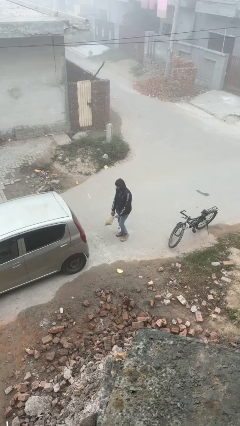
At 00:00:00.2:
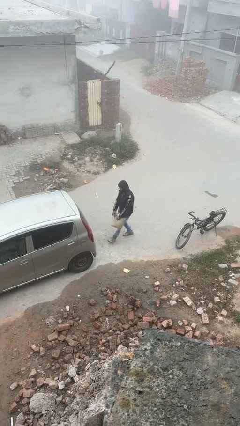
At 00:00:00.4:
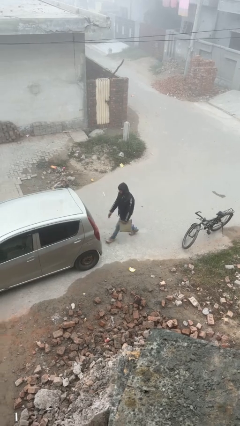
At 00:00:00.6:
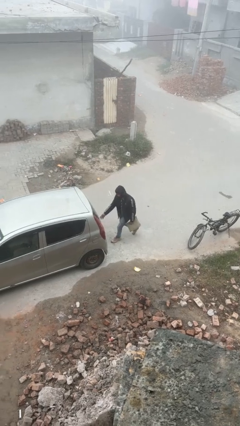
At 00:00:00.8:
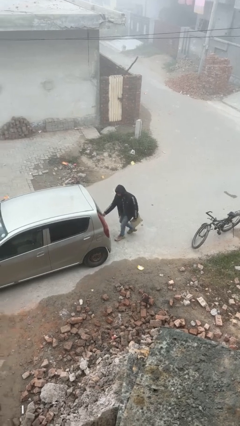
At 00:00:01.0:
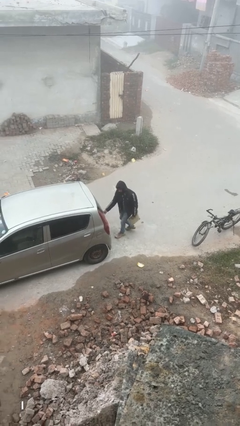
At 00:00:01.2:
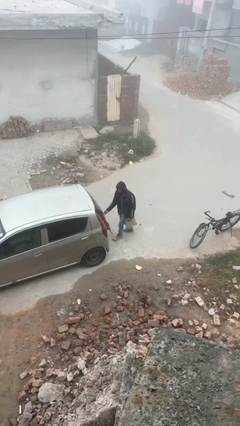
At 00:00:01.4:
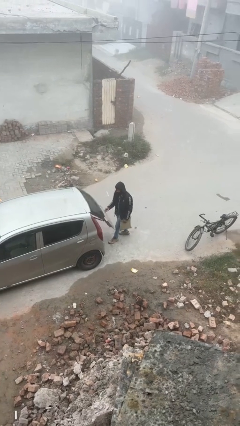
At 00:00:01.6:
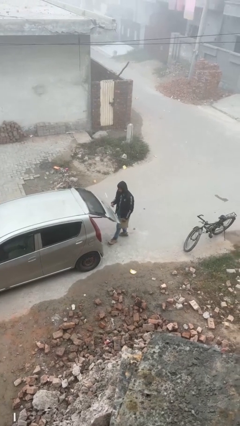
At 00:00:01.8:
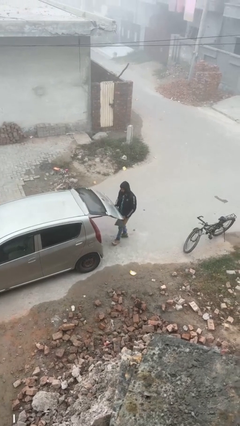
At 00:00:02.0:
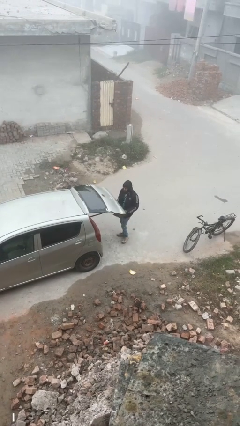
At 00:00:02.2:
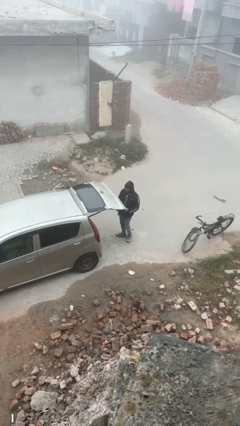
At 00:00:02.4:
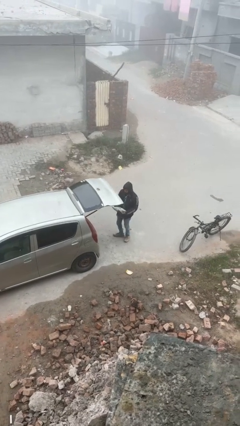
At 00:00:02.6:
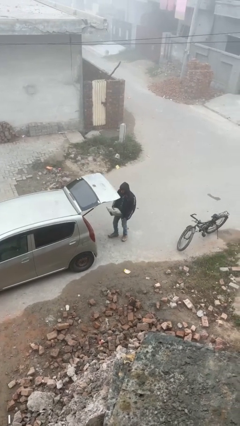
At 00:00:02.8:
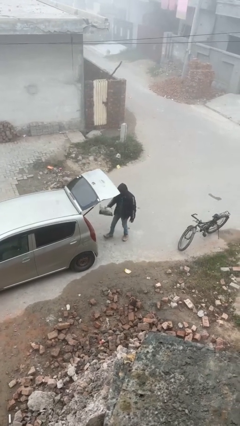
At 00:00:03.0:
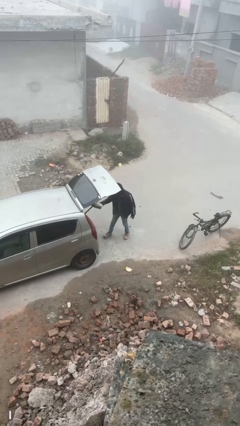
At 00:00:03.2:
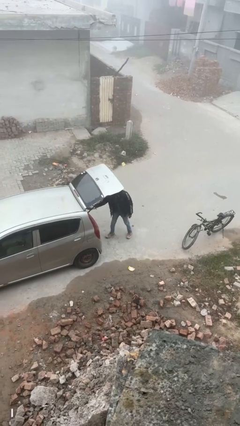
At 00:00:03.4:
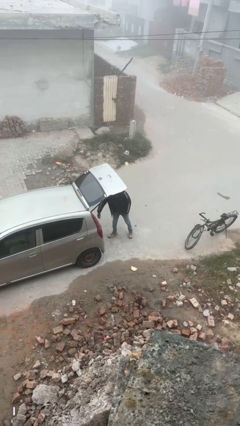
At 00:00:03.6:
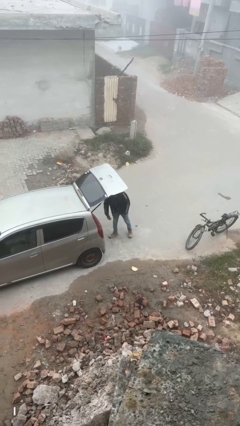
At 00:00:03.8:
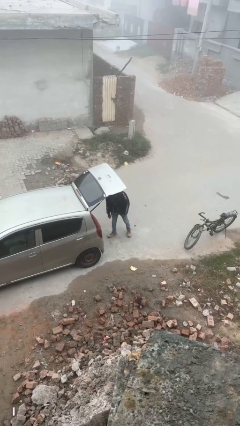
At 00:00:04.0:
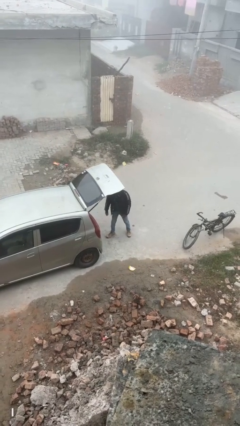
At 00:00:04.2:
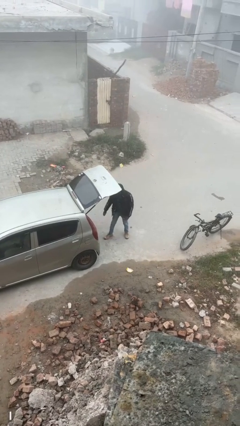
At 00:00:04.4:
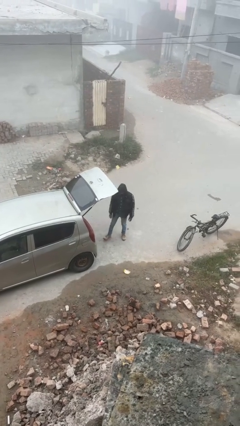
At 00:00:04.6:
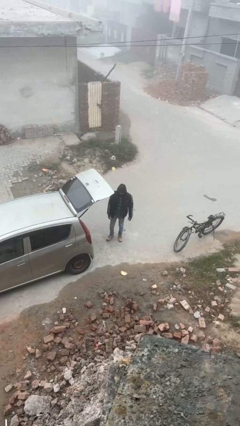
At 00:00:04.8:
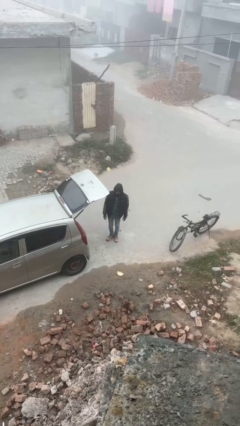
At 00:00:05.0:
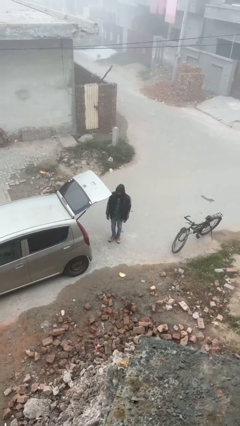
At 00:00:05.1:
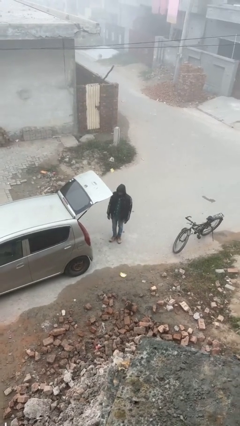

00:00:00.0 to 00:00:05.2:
person loads car

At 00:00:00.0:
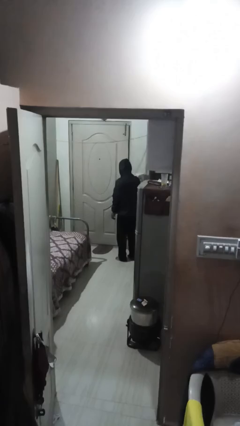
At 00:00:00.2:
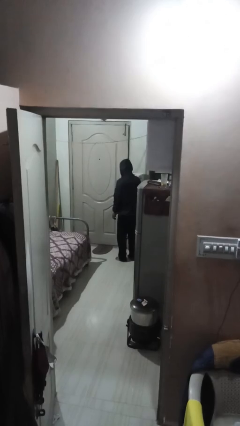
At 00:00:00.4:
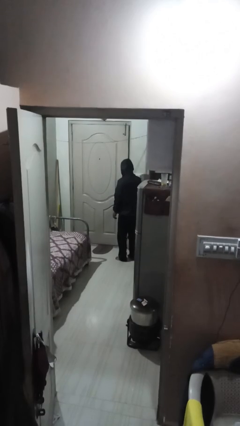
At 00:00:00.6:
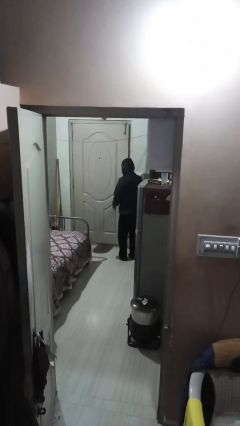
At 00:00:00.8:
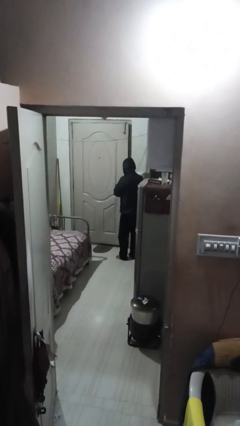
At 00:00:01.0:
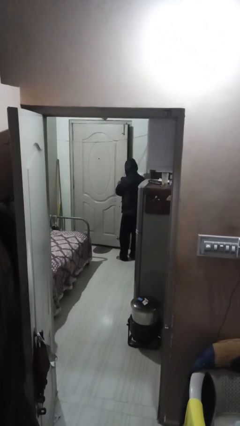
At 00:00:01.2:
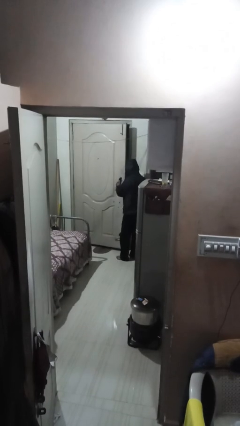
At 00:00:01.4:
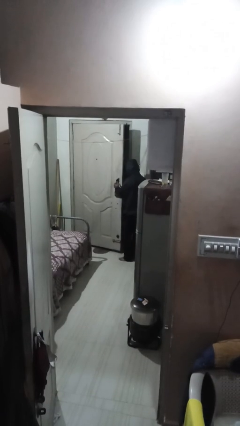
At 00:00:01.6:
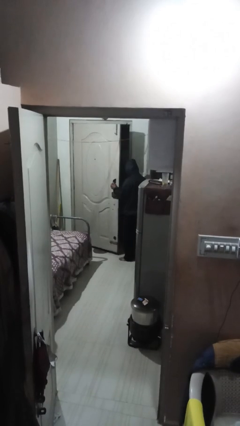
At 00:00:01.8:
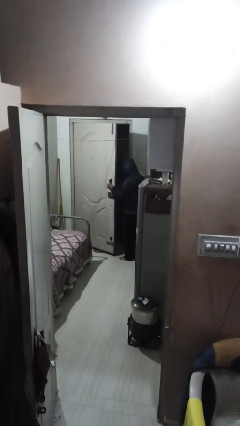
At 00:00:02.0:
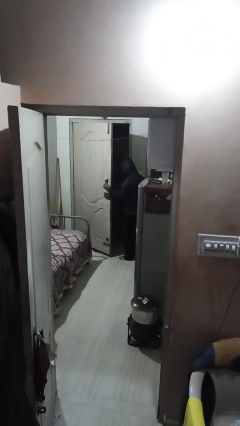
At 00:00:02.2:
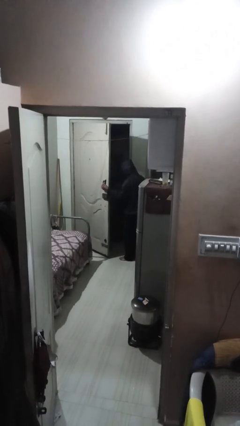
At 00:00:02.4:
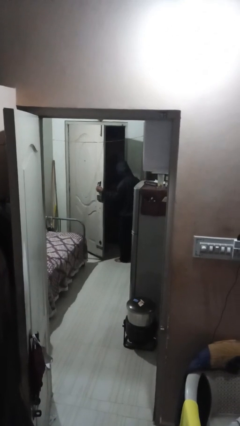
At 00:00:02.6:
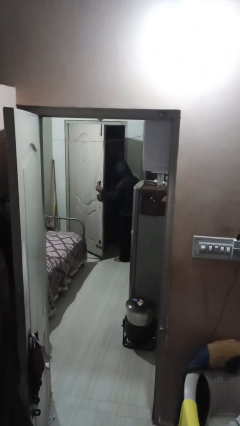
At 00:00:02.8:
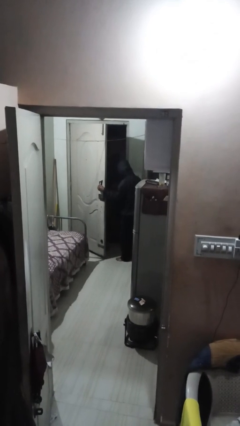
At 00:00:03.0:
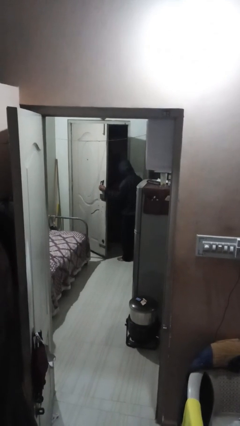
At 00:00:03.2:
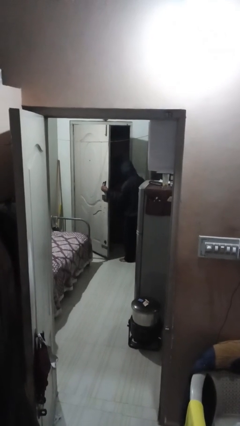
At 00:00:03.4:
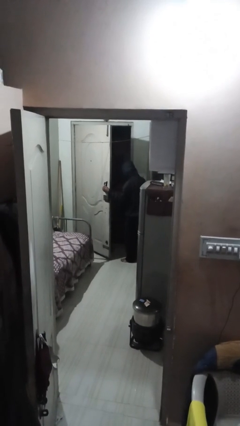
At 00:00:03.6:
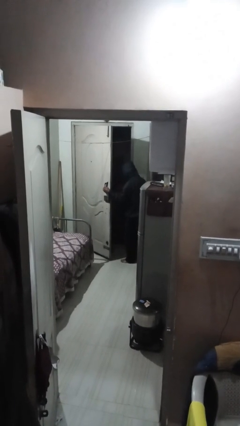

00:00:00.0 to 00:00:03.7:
person opens facility door

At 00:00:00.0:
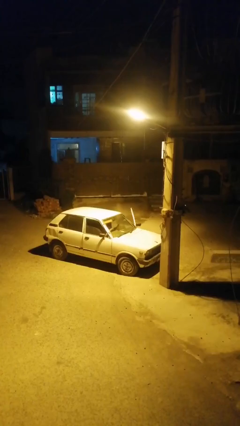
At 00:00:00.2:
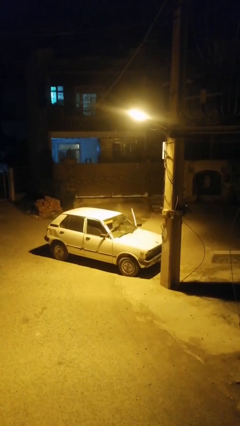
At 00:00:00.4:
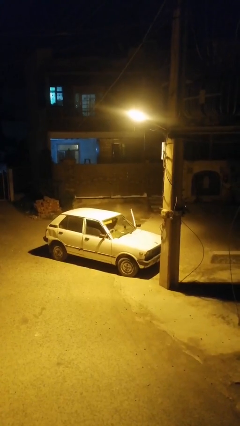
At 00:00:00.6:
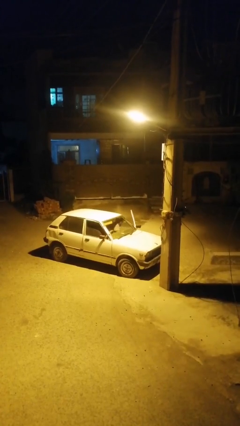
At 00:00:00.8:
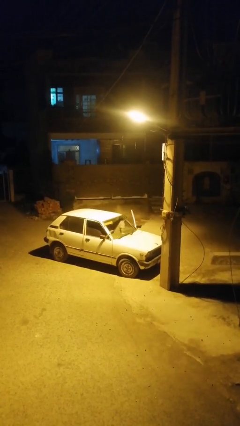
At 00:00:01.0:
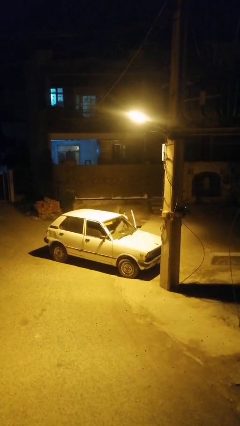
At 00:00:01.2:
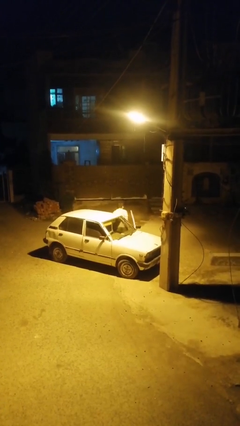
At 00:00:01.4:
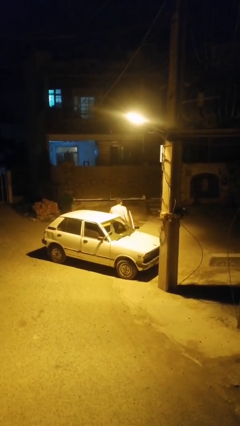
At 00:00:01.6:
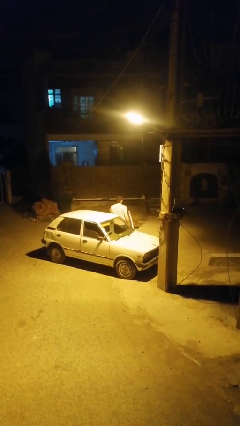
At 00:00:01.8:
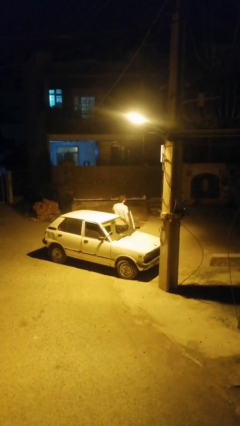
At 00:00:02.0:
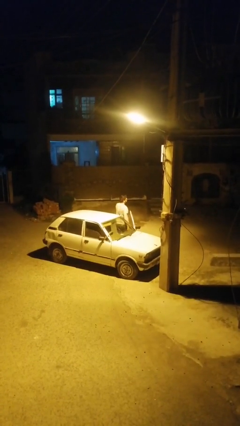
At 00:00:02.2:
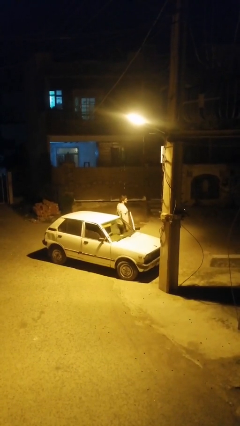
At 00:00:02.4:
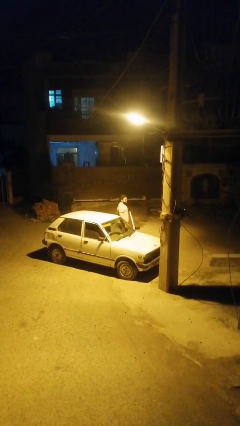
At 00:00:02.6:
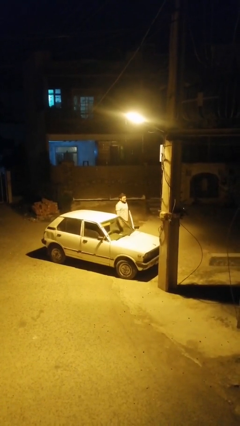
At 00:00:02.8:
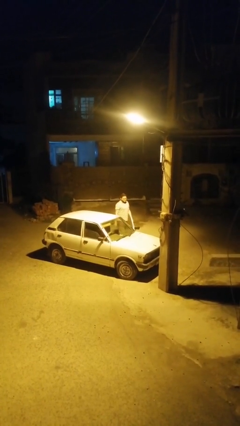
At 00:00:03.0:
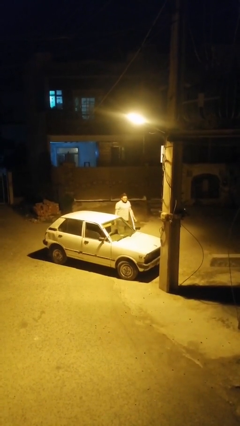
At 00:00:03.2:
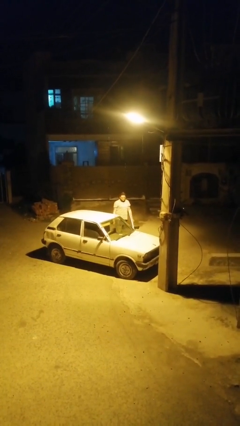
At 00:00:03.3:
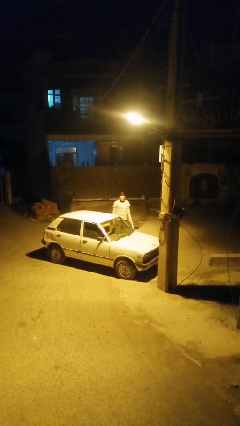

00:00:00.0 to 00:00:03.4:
person exits car

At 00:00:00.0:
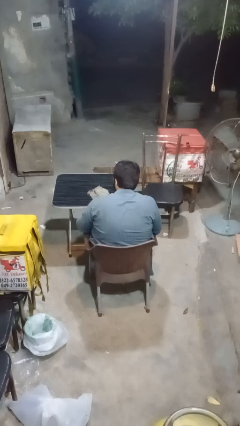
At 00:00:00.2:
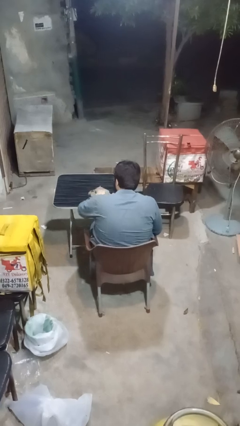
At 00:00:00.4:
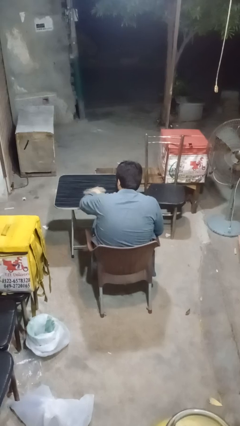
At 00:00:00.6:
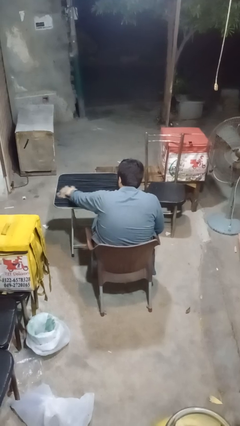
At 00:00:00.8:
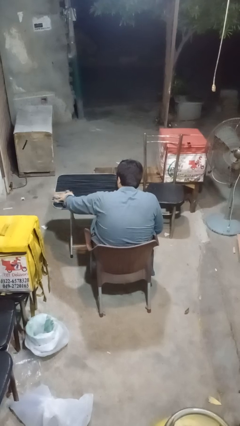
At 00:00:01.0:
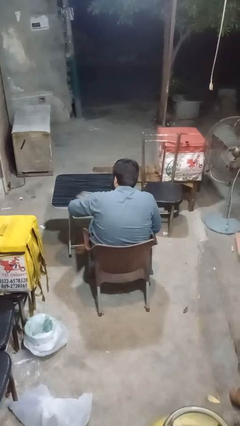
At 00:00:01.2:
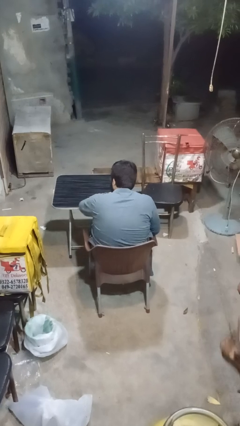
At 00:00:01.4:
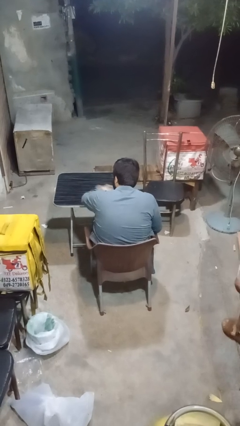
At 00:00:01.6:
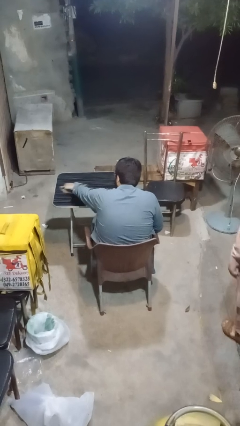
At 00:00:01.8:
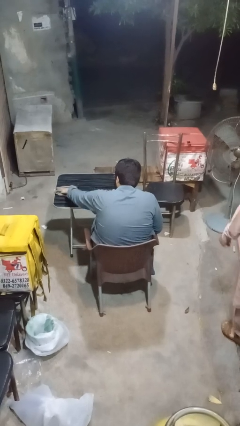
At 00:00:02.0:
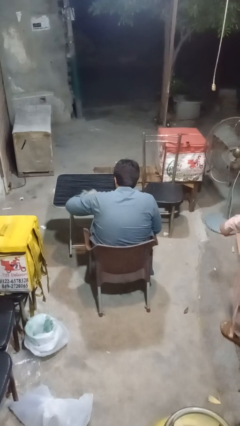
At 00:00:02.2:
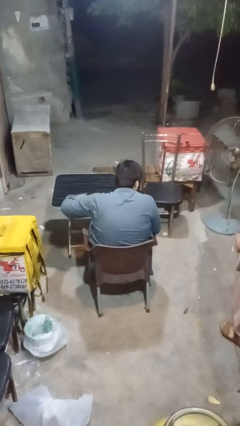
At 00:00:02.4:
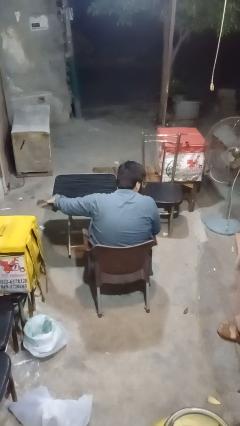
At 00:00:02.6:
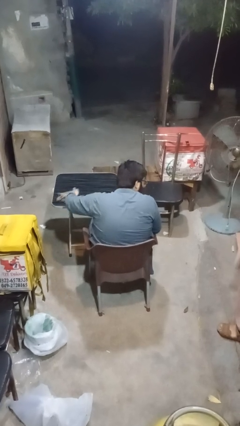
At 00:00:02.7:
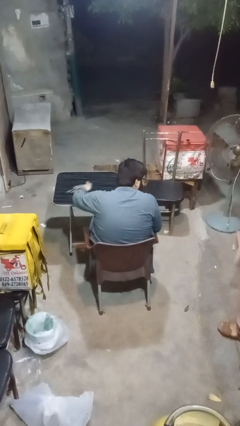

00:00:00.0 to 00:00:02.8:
person cleans table with rag

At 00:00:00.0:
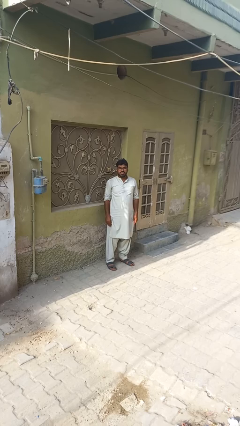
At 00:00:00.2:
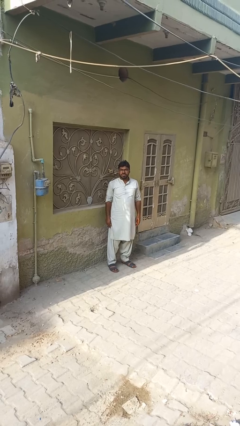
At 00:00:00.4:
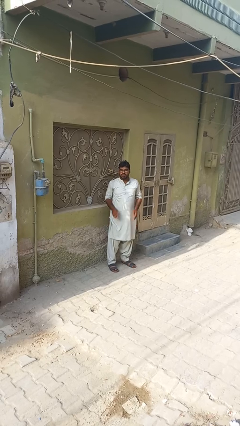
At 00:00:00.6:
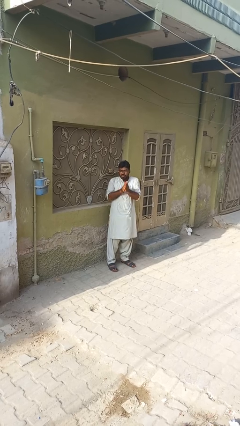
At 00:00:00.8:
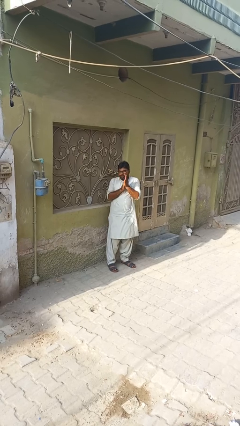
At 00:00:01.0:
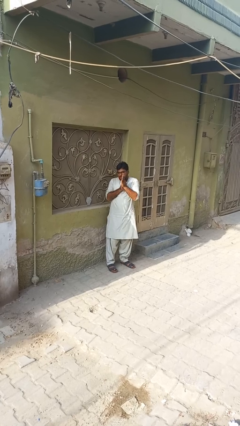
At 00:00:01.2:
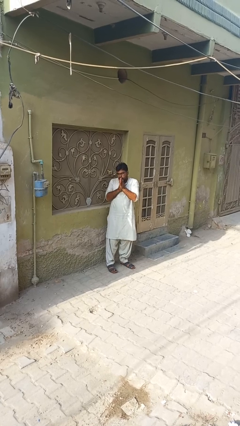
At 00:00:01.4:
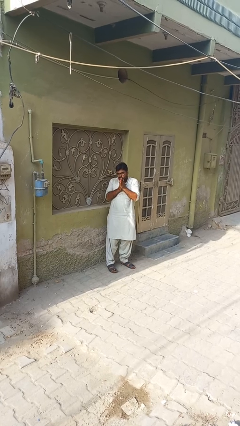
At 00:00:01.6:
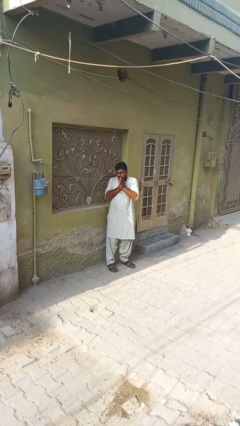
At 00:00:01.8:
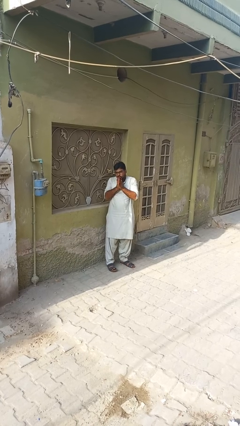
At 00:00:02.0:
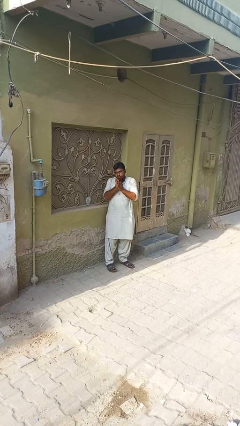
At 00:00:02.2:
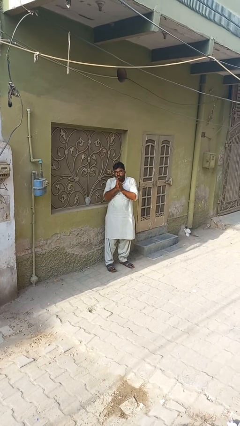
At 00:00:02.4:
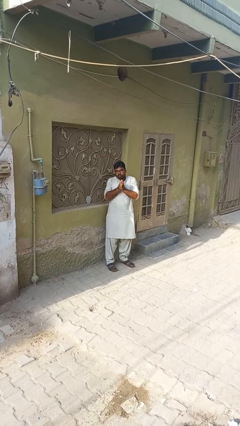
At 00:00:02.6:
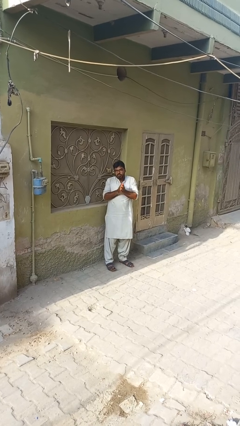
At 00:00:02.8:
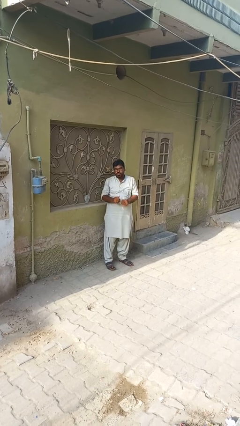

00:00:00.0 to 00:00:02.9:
person blows into hands
